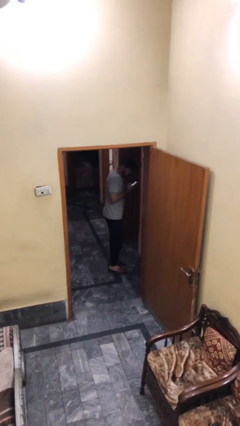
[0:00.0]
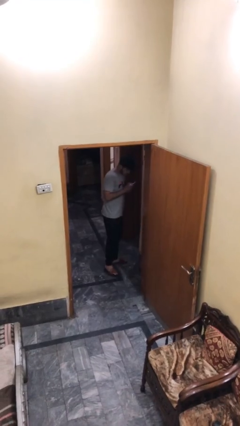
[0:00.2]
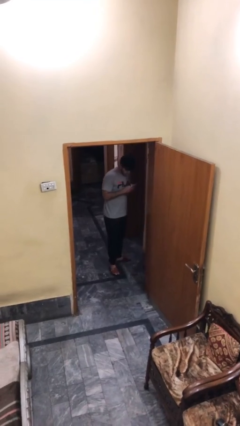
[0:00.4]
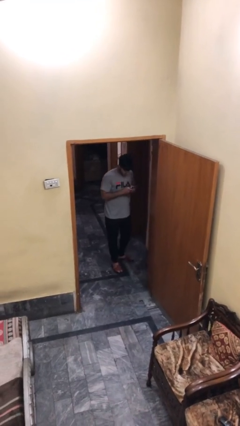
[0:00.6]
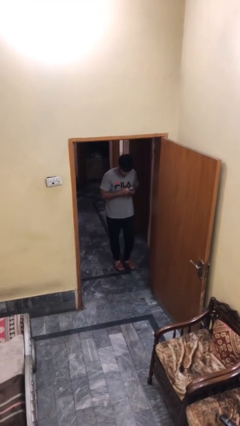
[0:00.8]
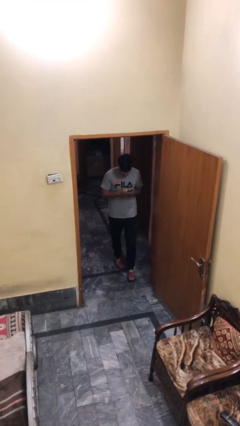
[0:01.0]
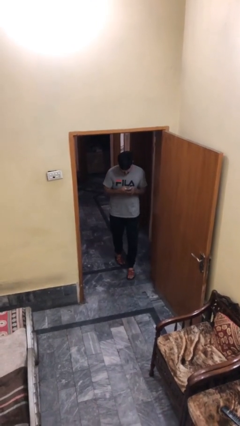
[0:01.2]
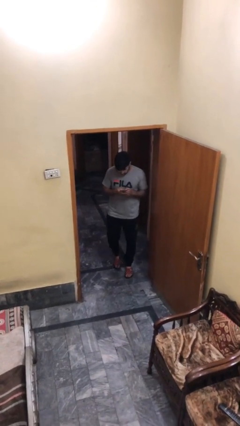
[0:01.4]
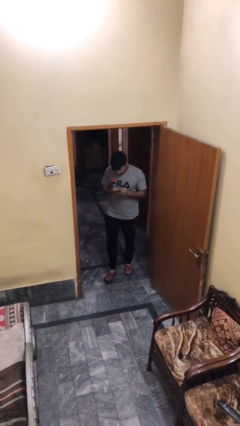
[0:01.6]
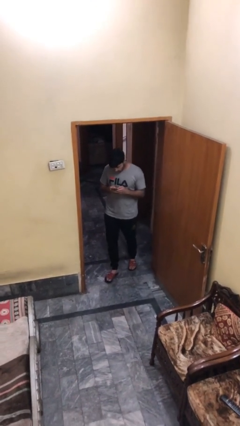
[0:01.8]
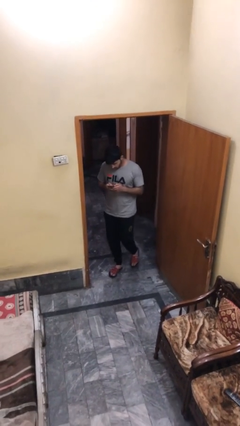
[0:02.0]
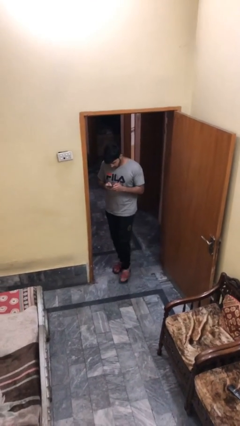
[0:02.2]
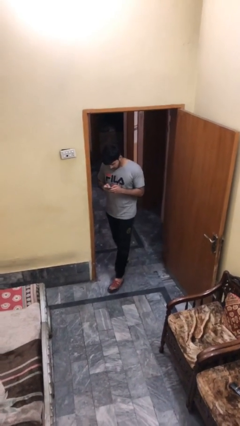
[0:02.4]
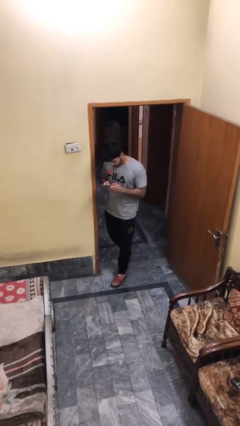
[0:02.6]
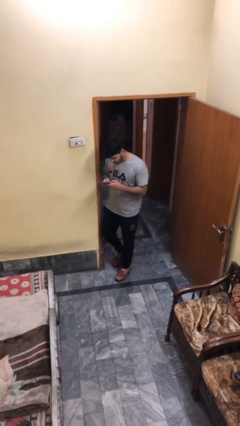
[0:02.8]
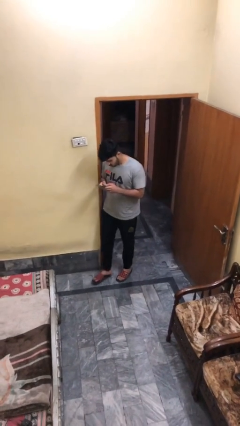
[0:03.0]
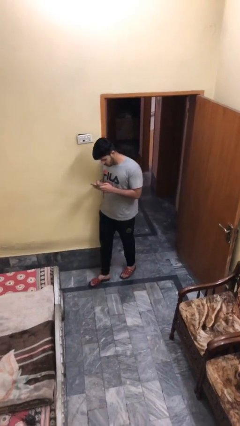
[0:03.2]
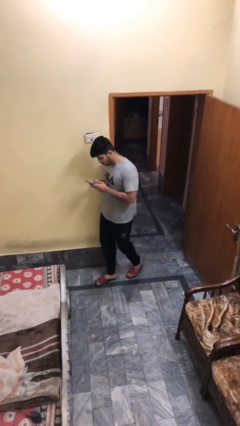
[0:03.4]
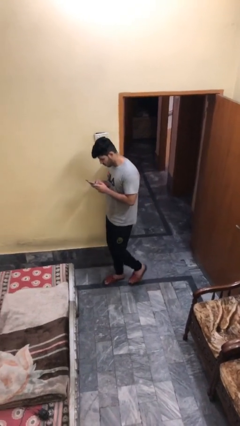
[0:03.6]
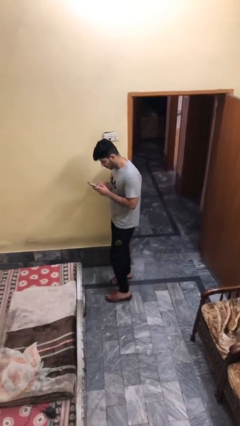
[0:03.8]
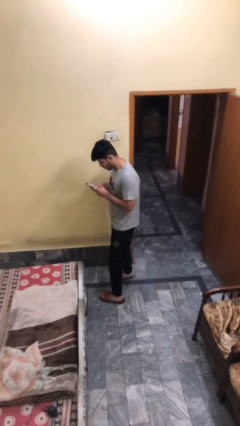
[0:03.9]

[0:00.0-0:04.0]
person enters scene through structure

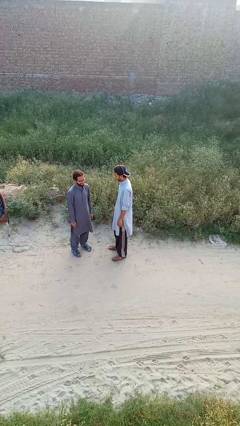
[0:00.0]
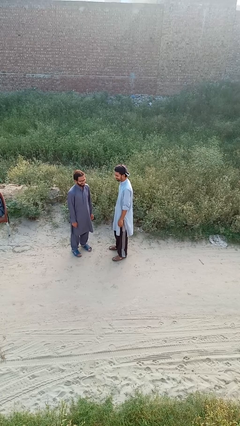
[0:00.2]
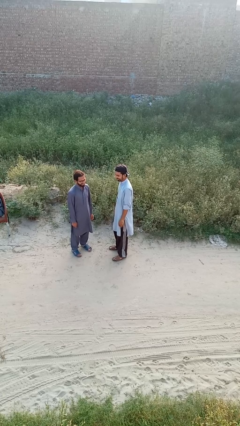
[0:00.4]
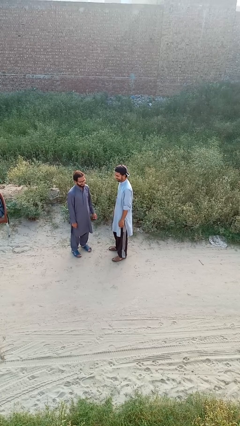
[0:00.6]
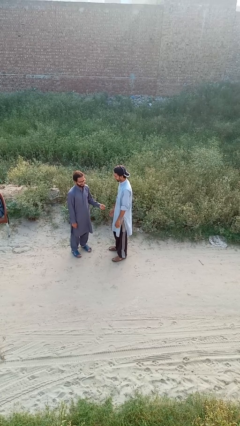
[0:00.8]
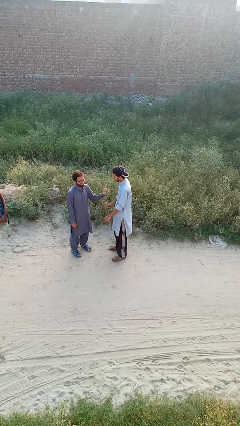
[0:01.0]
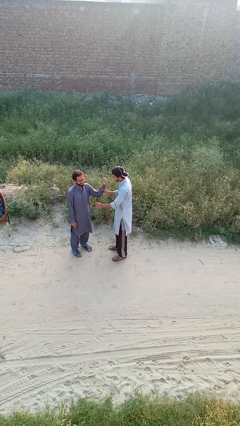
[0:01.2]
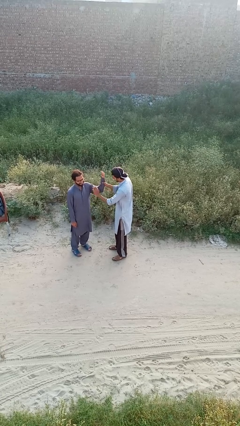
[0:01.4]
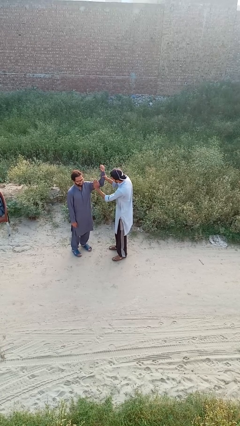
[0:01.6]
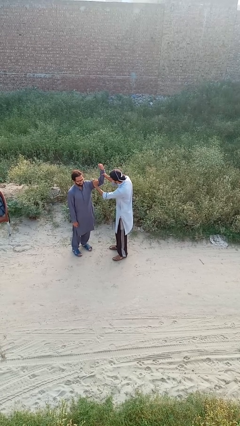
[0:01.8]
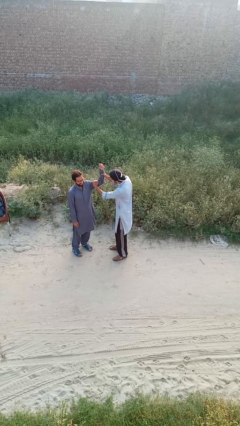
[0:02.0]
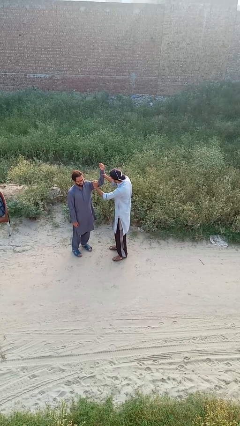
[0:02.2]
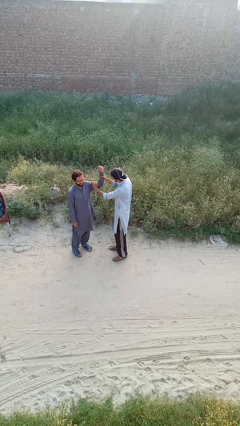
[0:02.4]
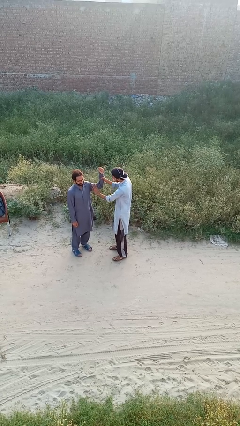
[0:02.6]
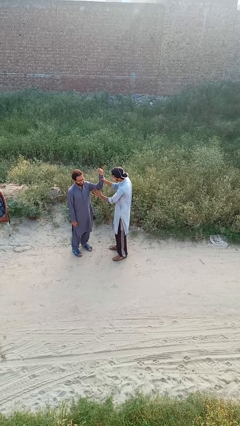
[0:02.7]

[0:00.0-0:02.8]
person grabs person by bicep

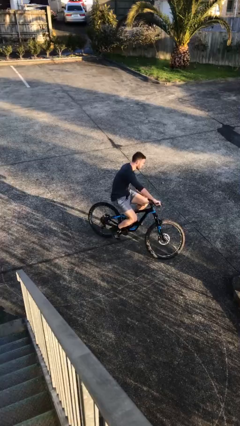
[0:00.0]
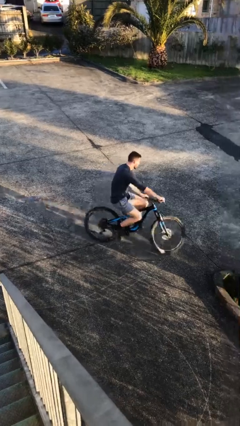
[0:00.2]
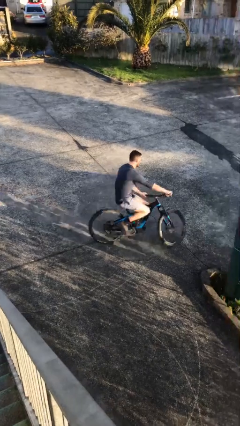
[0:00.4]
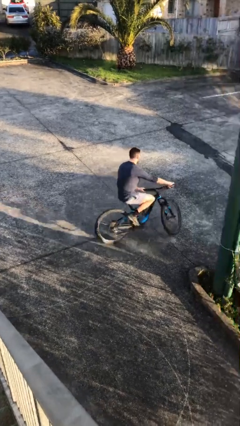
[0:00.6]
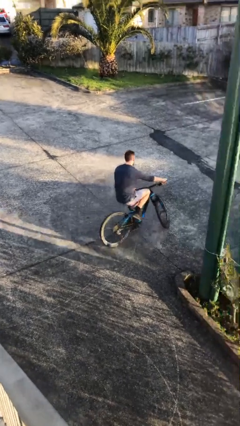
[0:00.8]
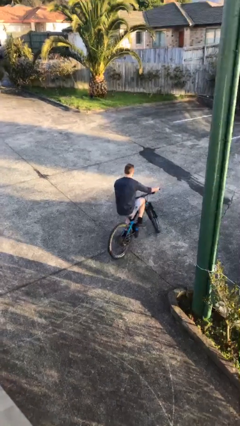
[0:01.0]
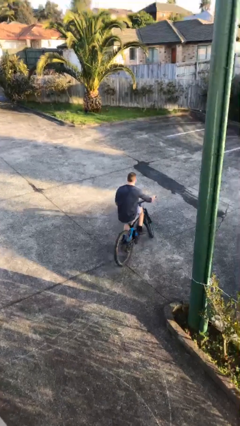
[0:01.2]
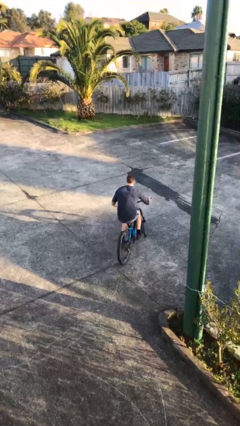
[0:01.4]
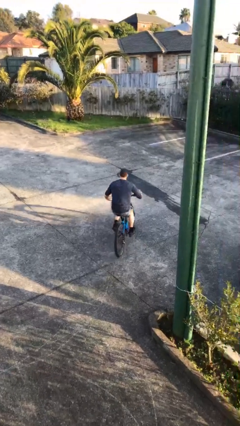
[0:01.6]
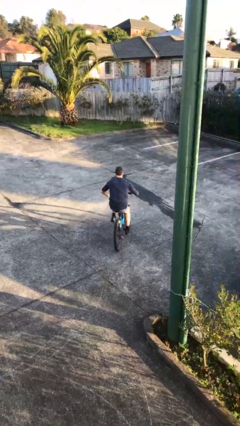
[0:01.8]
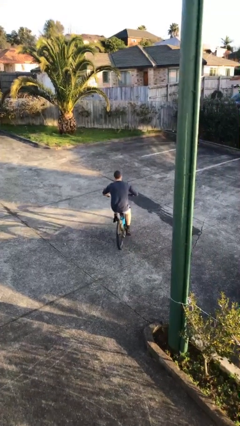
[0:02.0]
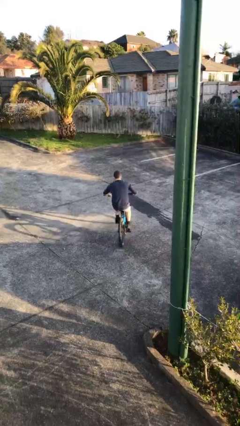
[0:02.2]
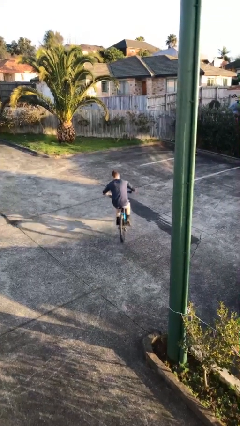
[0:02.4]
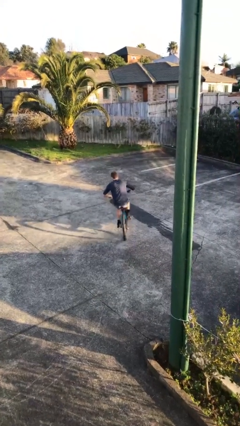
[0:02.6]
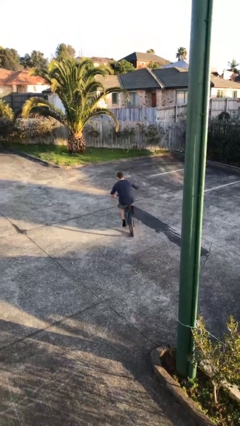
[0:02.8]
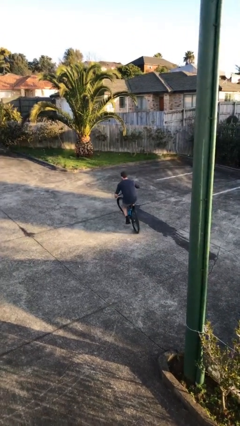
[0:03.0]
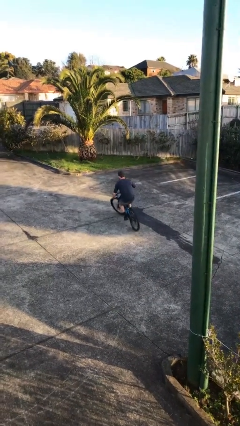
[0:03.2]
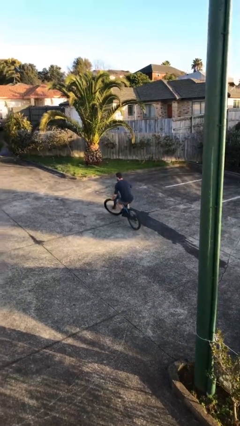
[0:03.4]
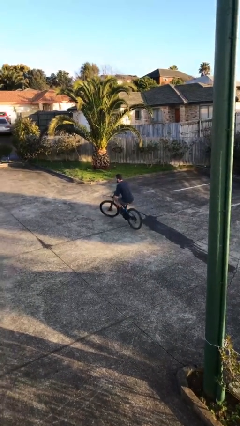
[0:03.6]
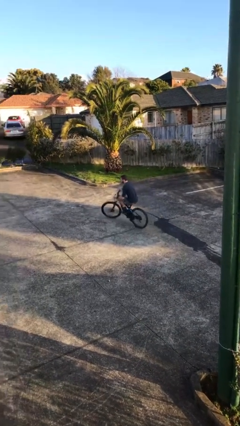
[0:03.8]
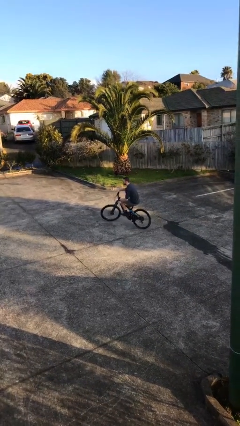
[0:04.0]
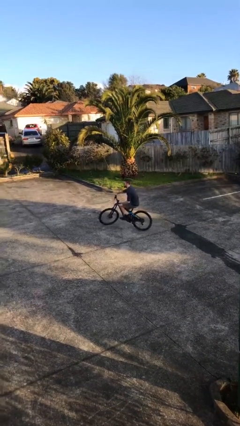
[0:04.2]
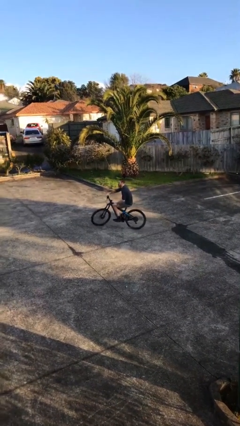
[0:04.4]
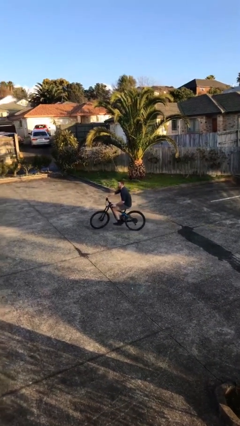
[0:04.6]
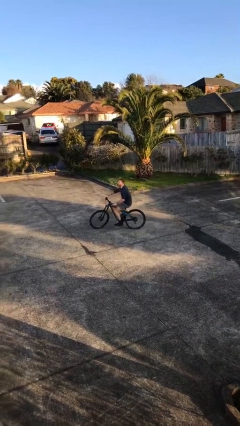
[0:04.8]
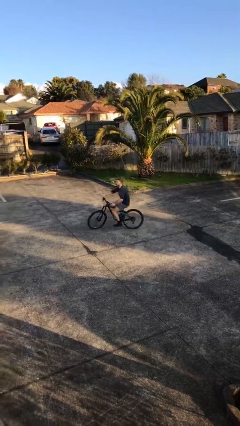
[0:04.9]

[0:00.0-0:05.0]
person rides bicycle

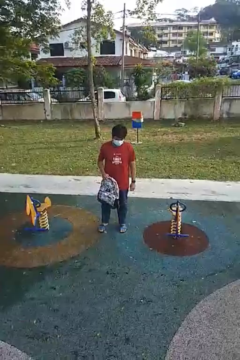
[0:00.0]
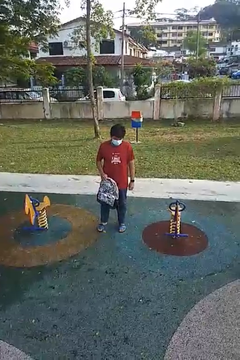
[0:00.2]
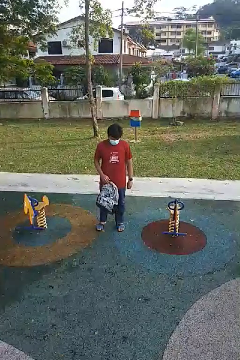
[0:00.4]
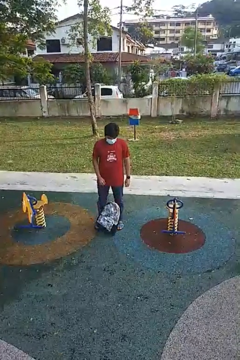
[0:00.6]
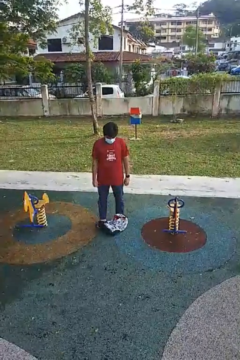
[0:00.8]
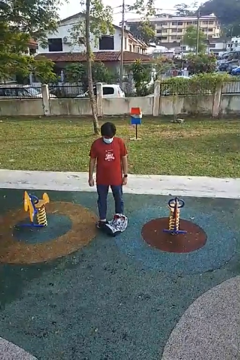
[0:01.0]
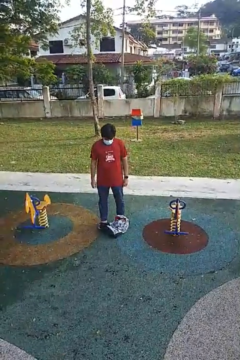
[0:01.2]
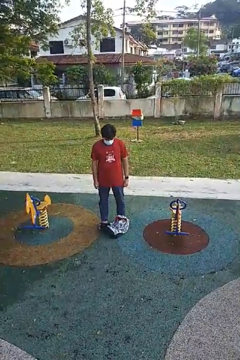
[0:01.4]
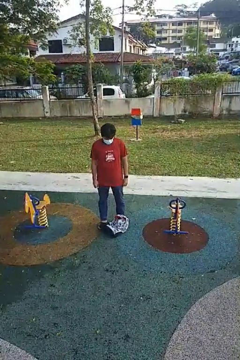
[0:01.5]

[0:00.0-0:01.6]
person drops object

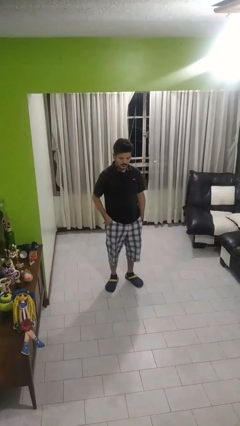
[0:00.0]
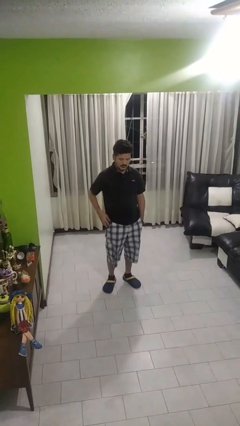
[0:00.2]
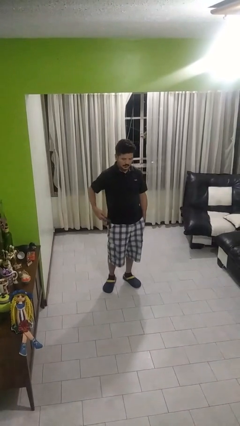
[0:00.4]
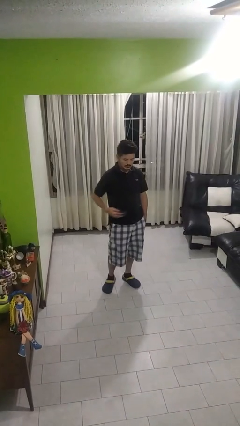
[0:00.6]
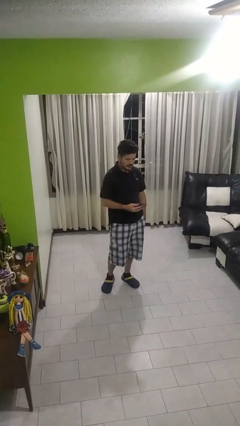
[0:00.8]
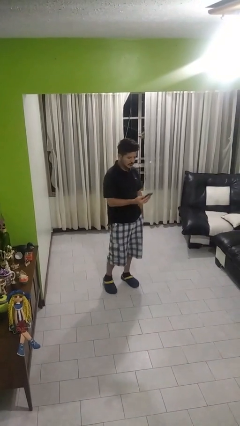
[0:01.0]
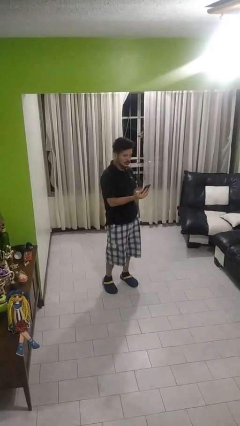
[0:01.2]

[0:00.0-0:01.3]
person takes phone from pocket

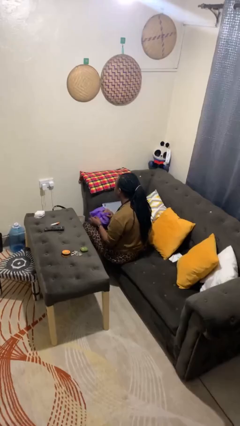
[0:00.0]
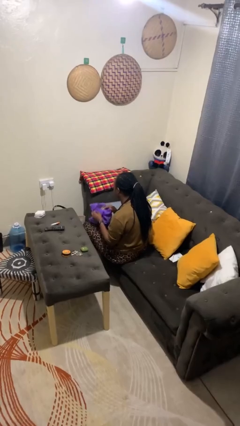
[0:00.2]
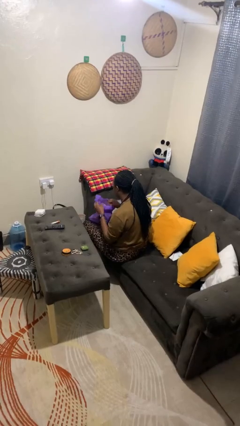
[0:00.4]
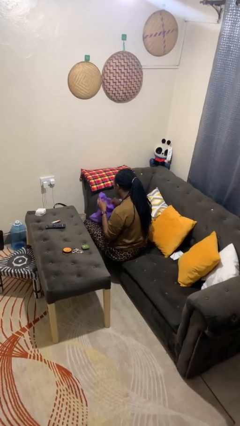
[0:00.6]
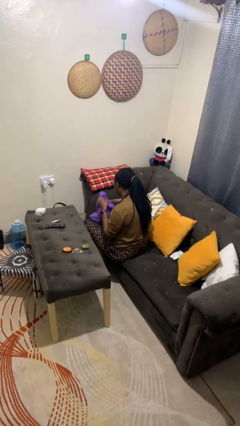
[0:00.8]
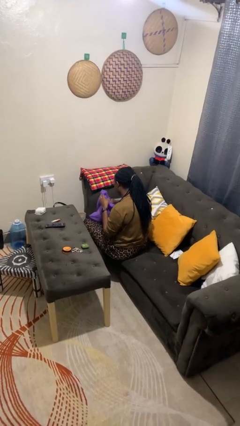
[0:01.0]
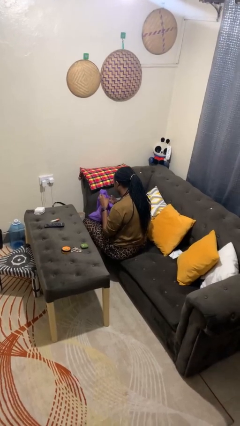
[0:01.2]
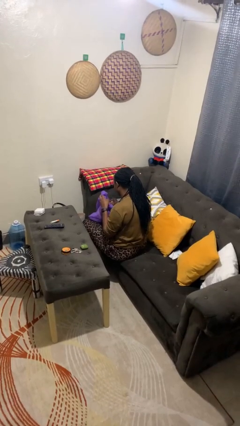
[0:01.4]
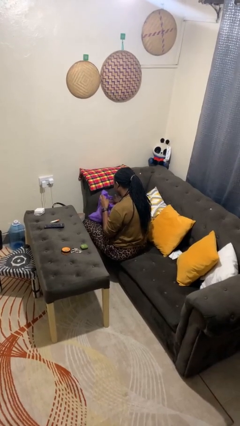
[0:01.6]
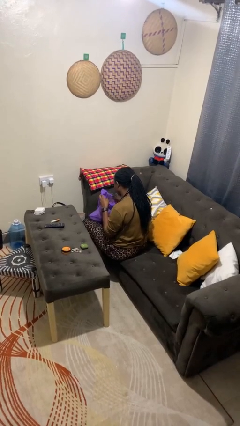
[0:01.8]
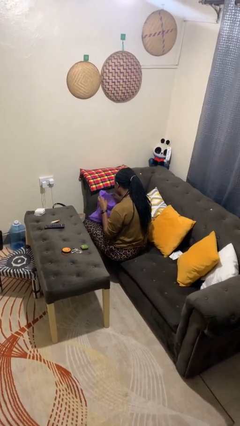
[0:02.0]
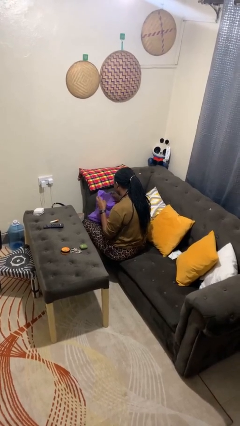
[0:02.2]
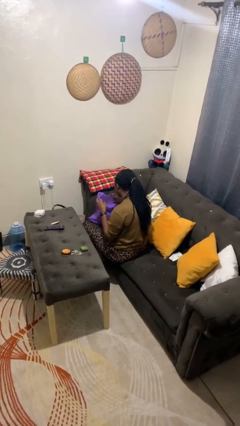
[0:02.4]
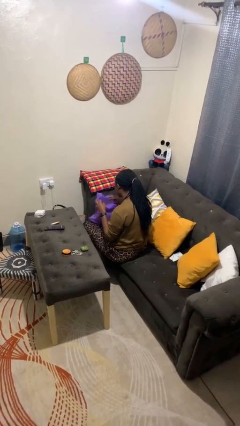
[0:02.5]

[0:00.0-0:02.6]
person searches in bag

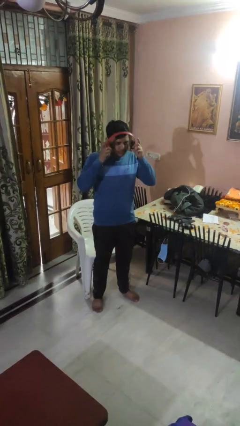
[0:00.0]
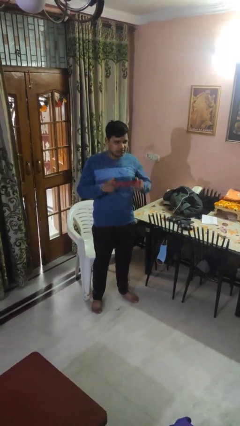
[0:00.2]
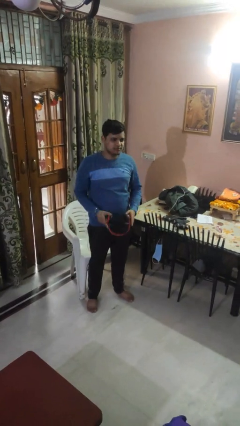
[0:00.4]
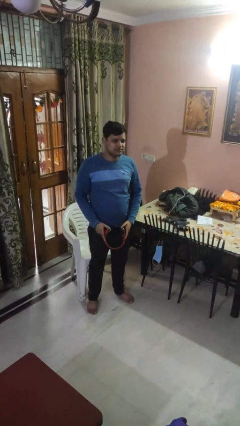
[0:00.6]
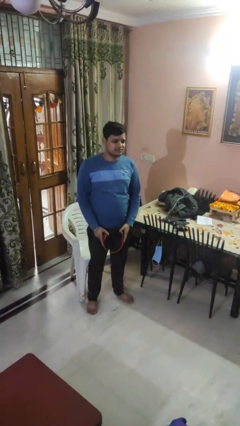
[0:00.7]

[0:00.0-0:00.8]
person takes off headphones
